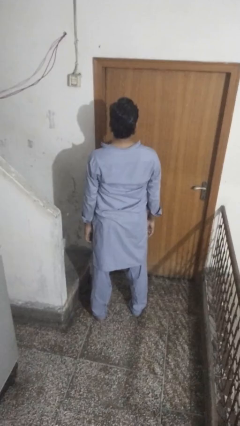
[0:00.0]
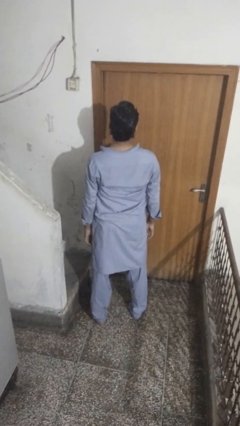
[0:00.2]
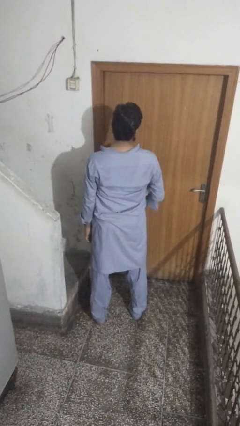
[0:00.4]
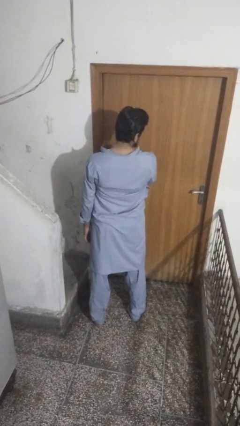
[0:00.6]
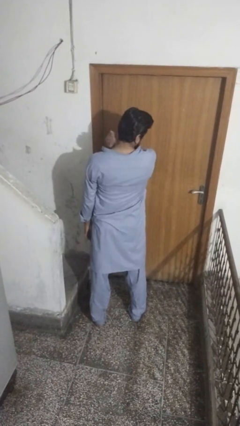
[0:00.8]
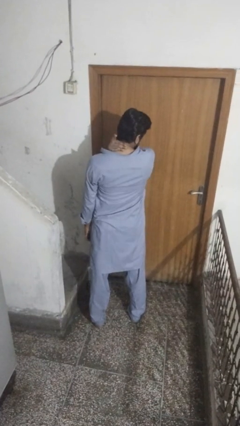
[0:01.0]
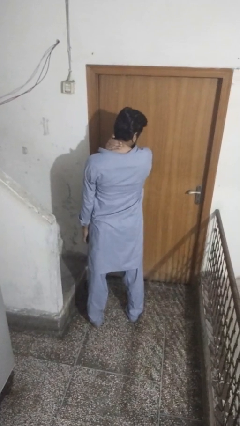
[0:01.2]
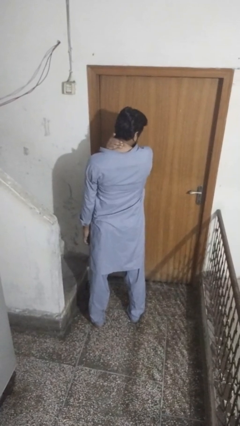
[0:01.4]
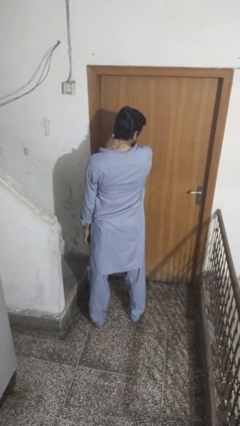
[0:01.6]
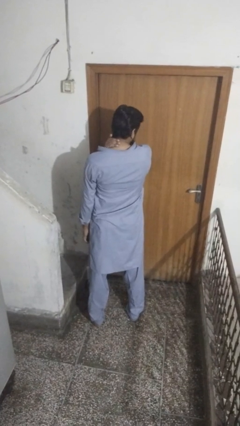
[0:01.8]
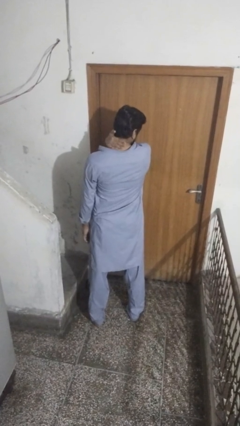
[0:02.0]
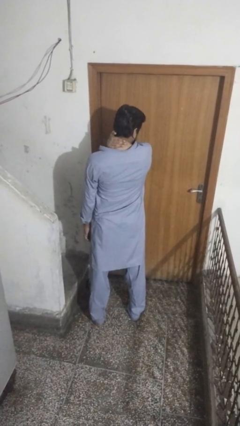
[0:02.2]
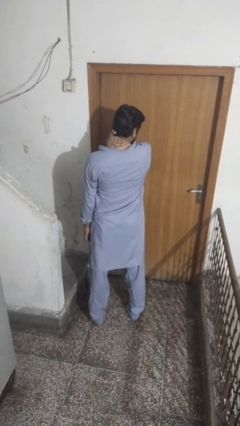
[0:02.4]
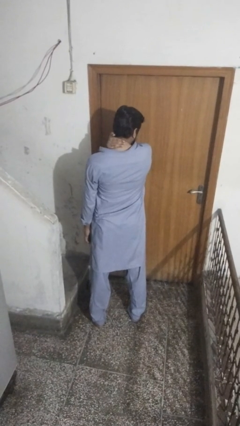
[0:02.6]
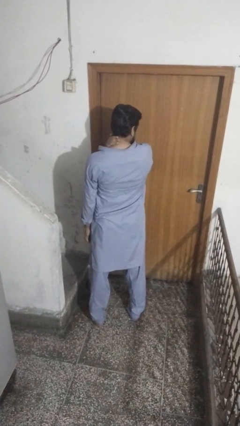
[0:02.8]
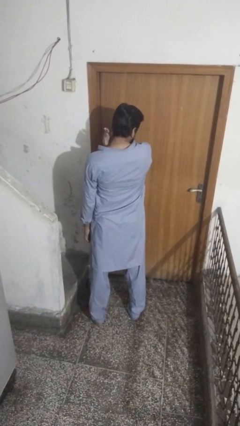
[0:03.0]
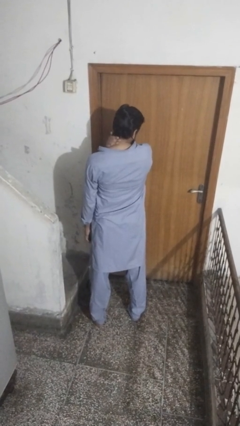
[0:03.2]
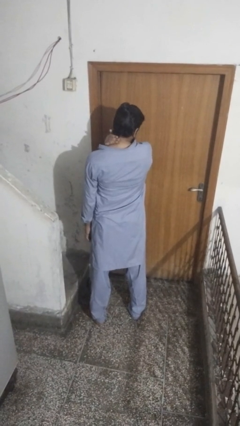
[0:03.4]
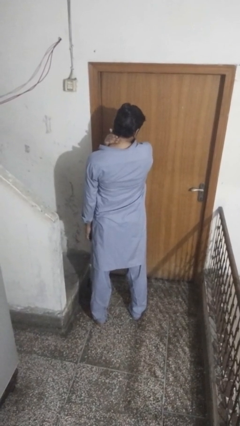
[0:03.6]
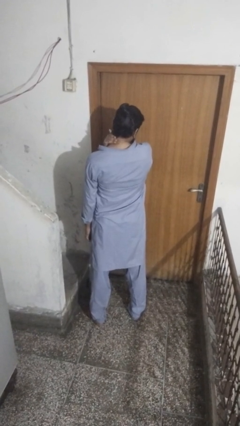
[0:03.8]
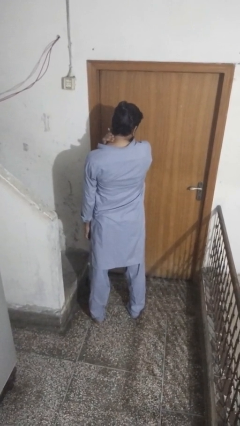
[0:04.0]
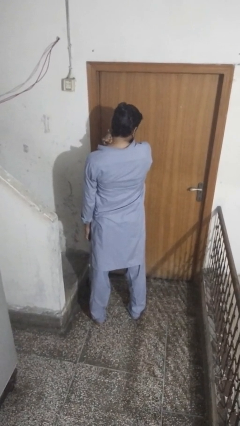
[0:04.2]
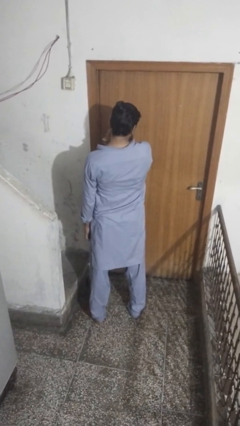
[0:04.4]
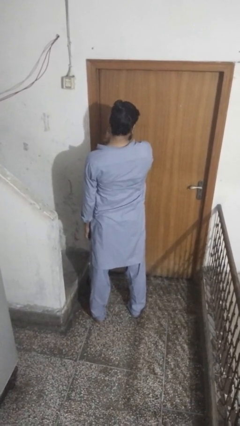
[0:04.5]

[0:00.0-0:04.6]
person rubs neck

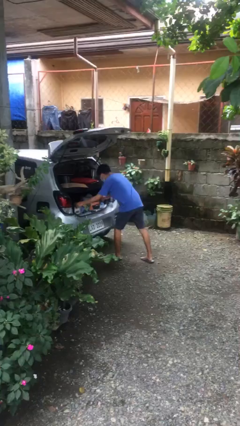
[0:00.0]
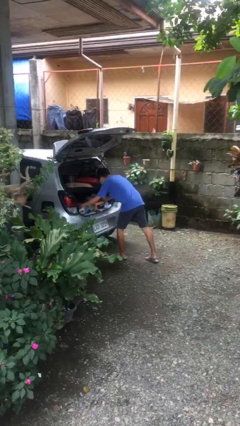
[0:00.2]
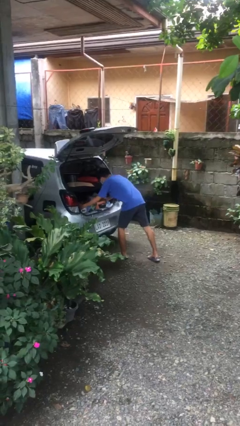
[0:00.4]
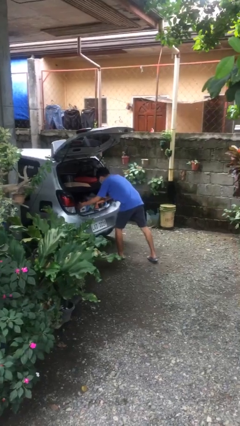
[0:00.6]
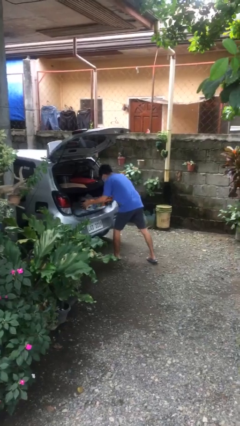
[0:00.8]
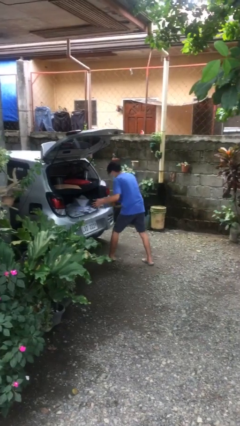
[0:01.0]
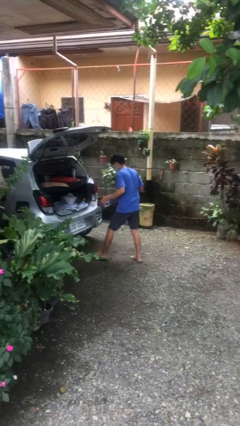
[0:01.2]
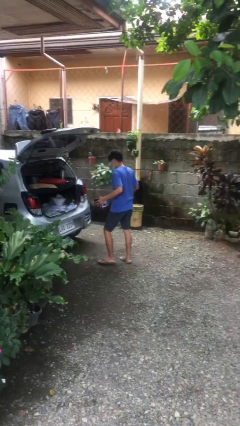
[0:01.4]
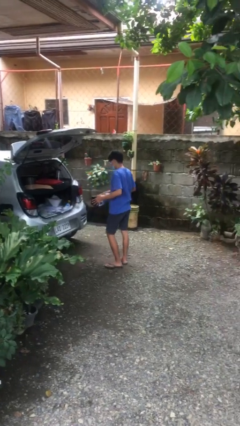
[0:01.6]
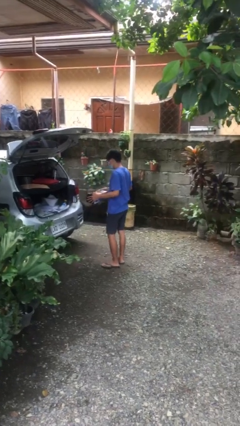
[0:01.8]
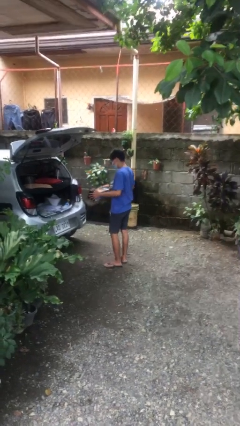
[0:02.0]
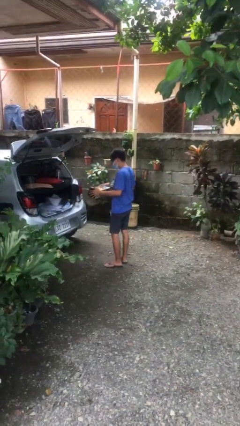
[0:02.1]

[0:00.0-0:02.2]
person unloads car

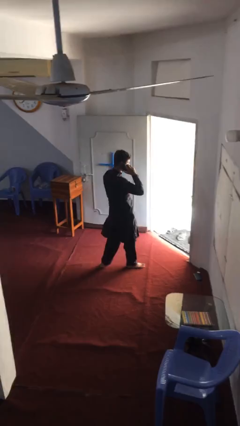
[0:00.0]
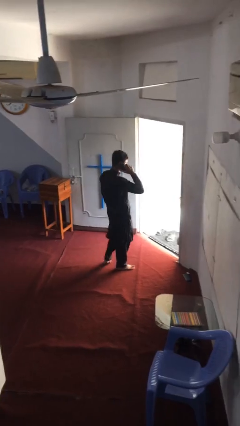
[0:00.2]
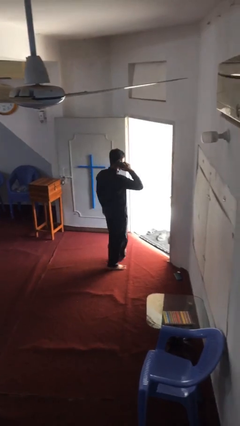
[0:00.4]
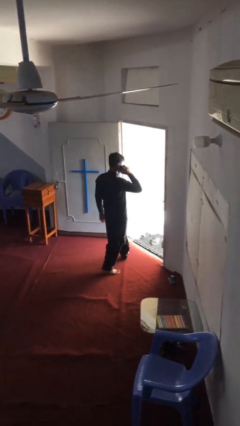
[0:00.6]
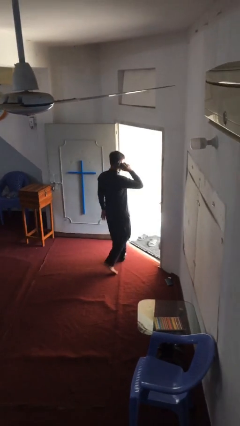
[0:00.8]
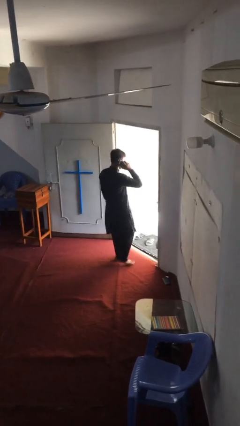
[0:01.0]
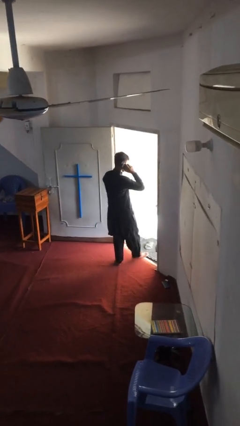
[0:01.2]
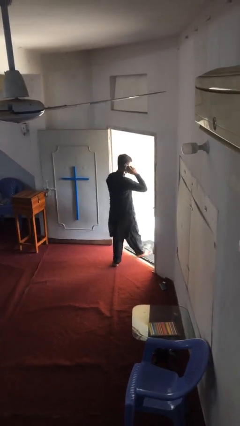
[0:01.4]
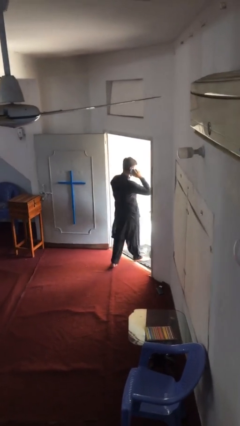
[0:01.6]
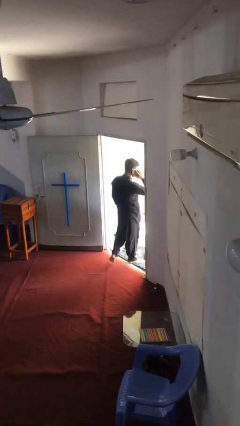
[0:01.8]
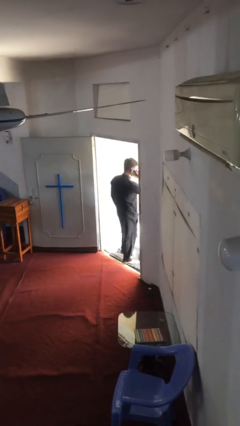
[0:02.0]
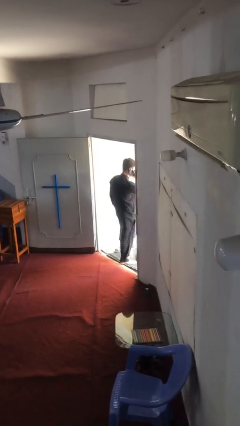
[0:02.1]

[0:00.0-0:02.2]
person exits scene through structure

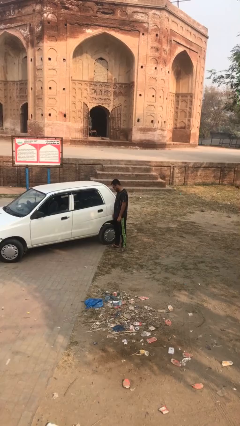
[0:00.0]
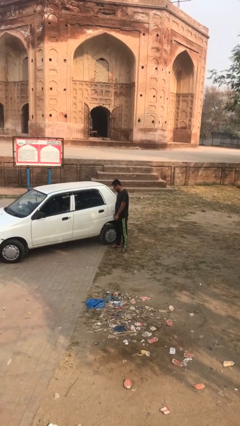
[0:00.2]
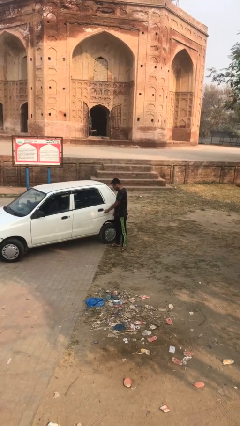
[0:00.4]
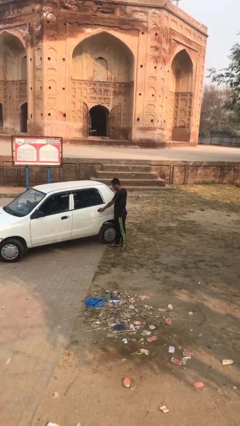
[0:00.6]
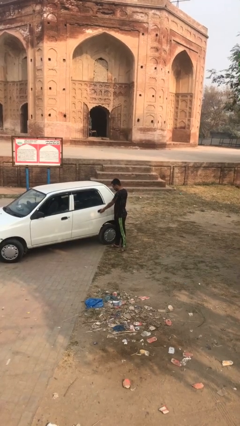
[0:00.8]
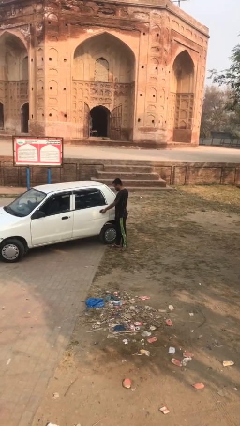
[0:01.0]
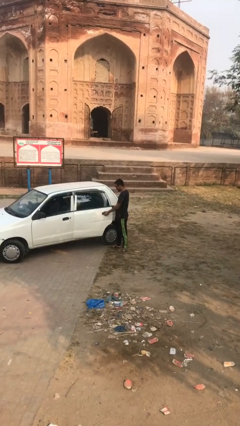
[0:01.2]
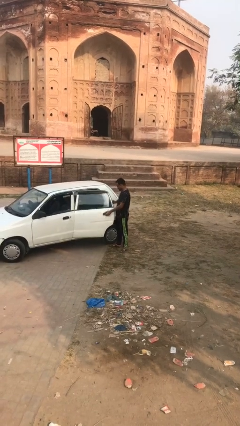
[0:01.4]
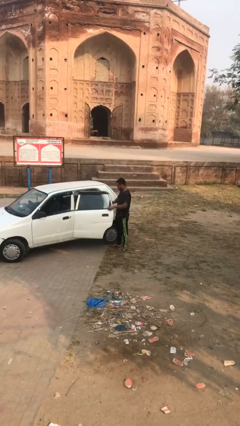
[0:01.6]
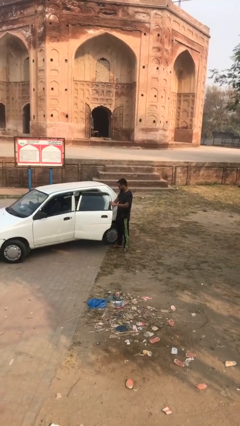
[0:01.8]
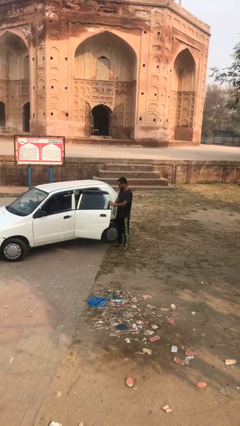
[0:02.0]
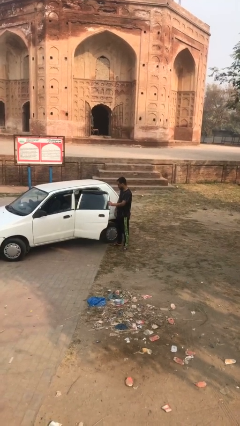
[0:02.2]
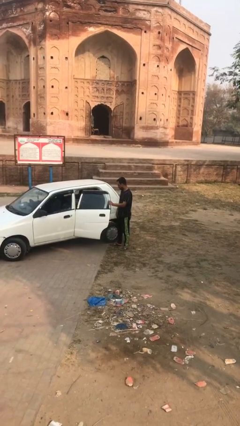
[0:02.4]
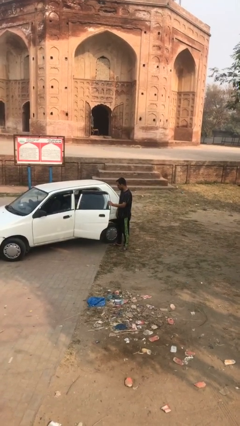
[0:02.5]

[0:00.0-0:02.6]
person opens car door

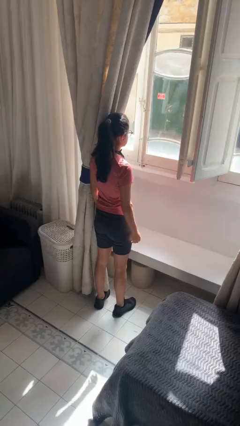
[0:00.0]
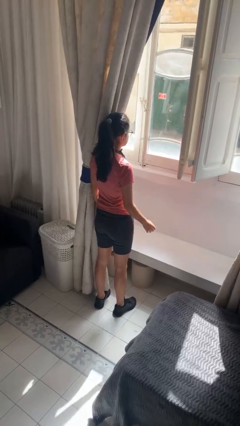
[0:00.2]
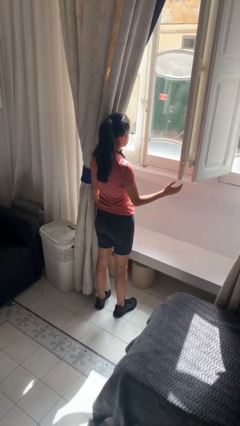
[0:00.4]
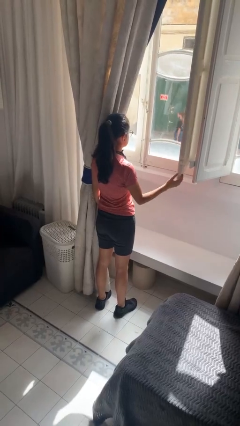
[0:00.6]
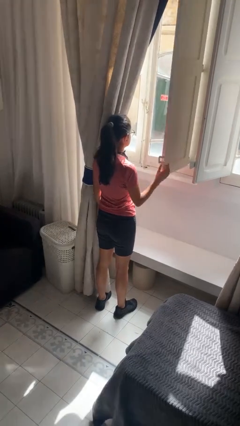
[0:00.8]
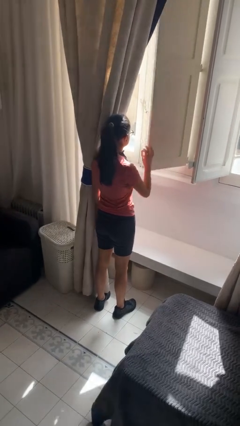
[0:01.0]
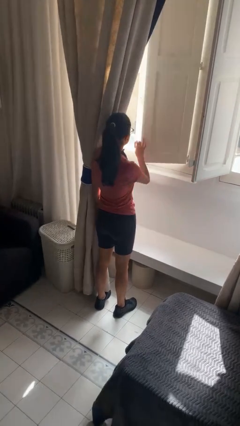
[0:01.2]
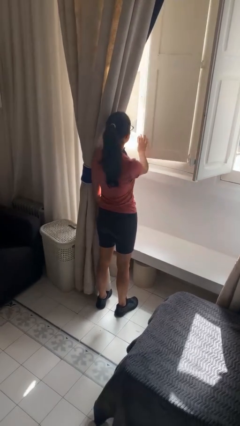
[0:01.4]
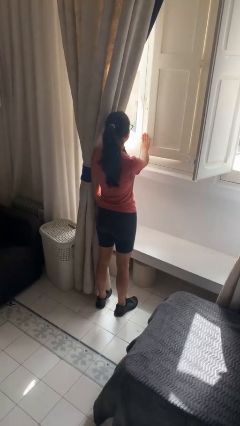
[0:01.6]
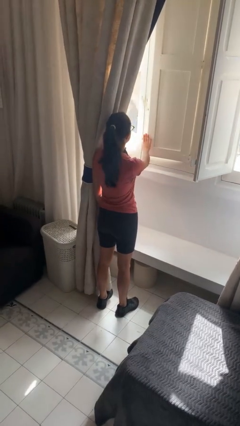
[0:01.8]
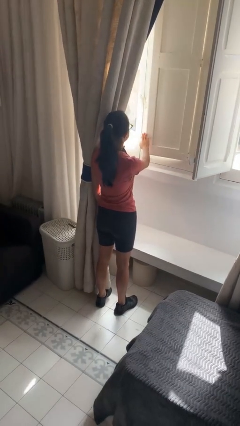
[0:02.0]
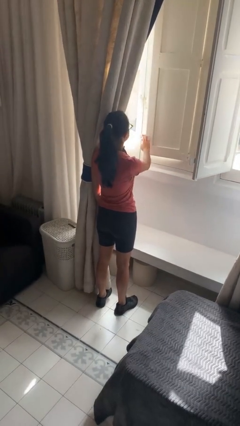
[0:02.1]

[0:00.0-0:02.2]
person closes home window

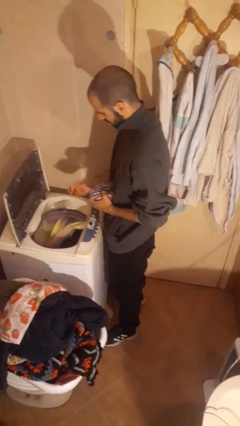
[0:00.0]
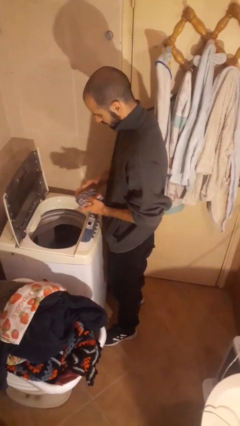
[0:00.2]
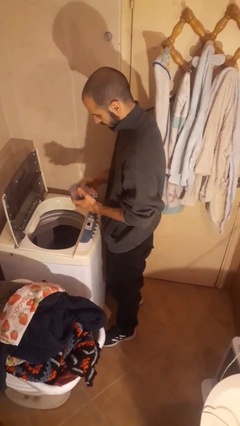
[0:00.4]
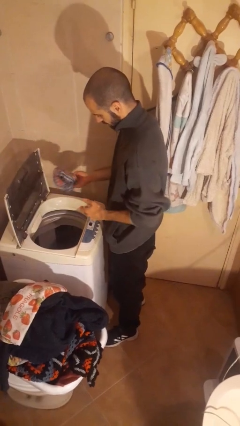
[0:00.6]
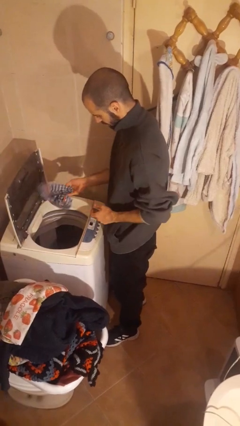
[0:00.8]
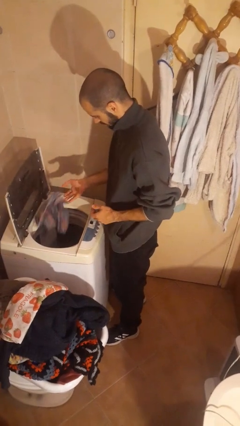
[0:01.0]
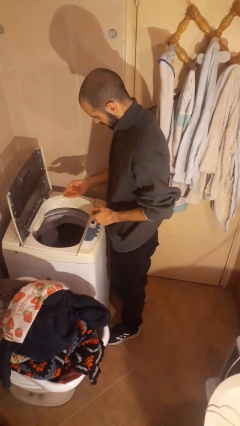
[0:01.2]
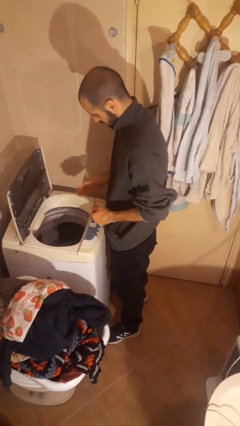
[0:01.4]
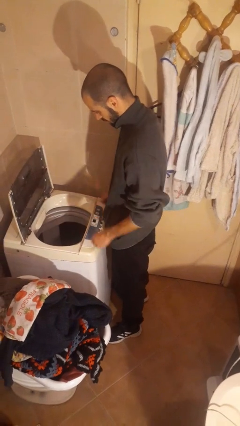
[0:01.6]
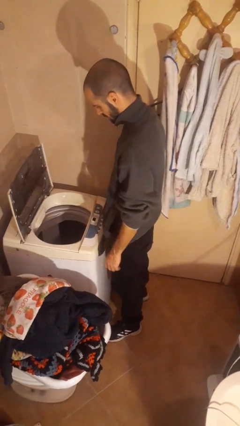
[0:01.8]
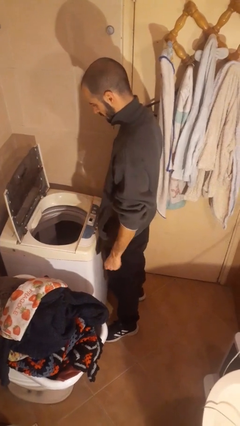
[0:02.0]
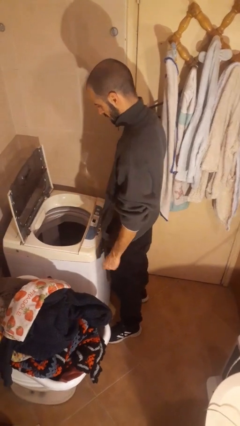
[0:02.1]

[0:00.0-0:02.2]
person unloads clotheswasher

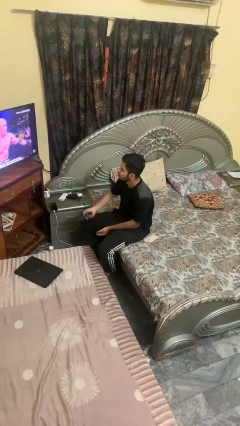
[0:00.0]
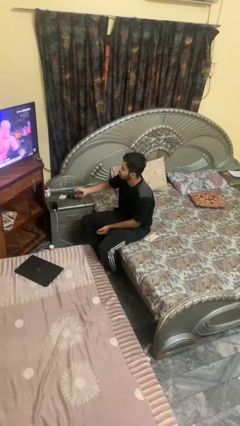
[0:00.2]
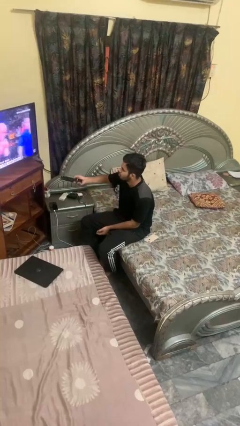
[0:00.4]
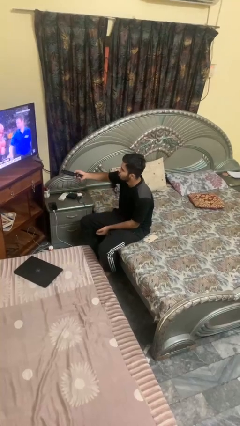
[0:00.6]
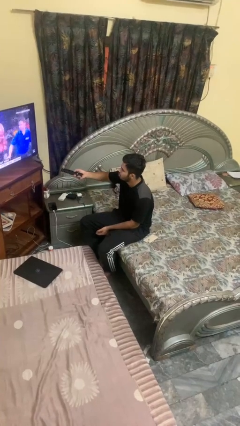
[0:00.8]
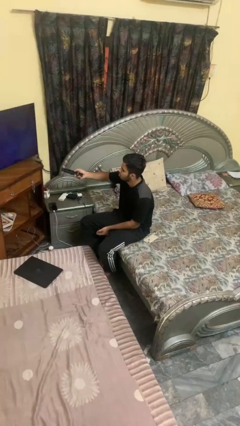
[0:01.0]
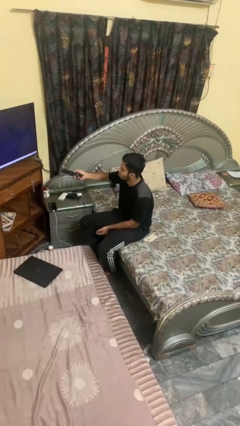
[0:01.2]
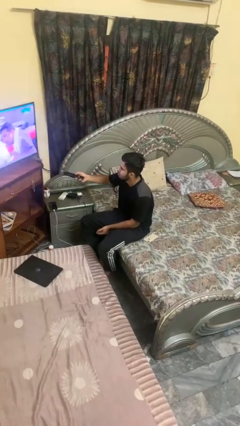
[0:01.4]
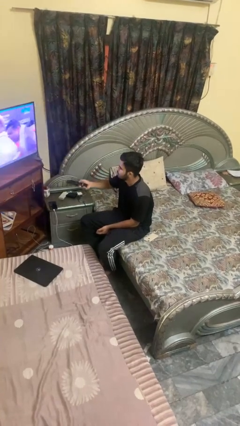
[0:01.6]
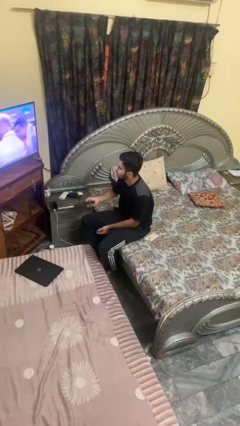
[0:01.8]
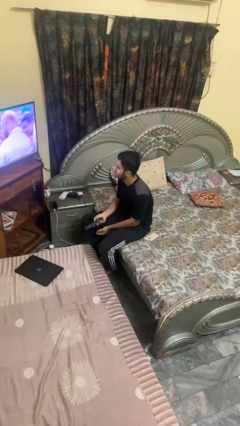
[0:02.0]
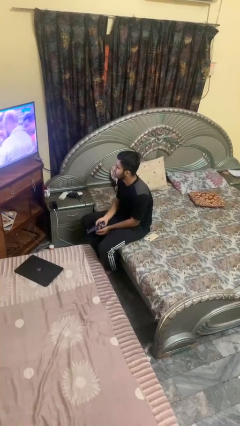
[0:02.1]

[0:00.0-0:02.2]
person uses television remote
